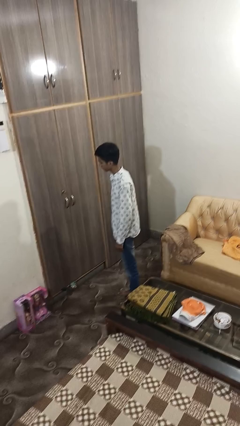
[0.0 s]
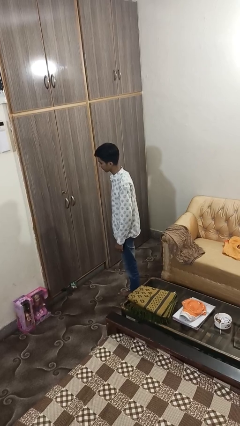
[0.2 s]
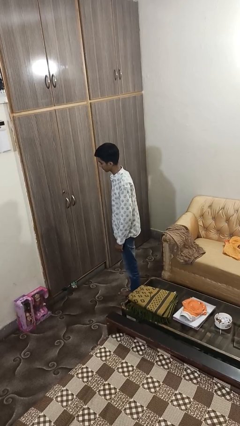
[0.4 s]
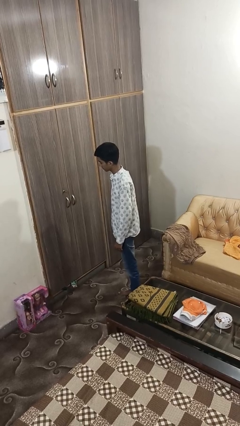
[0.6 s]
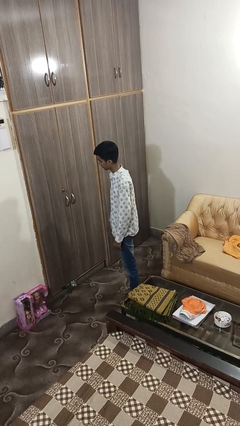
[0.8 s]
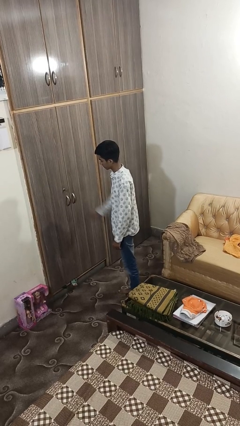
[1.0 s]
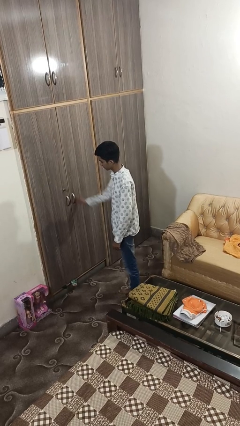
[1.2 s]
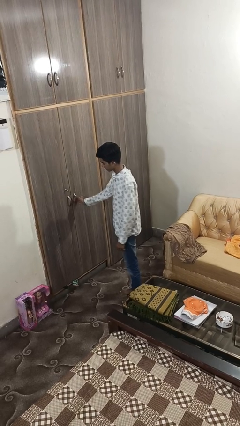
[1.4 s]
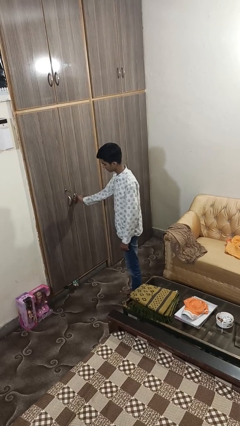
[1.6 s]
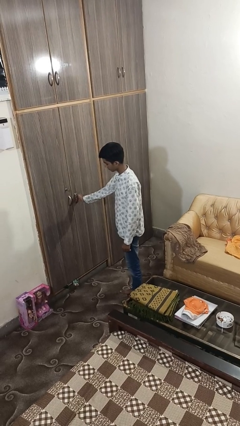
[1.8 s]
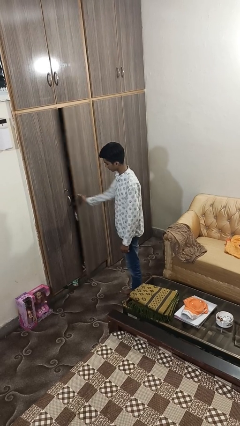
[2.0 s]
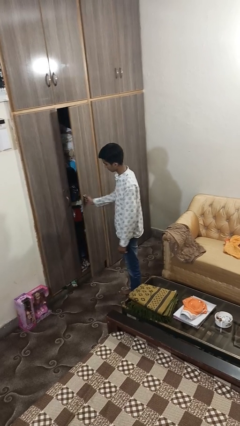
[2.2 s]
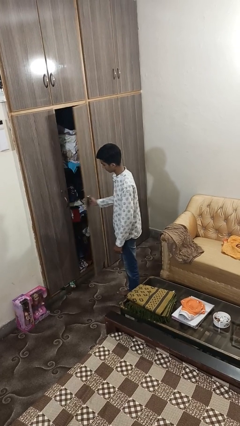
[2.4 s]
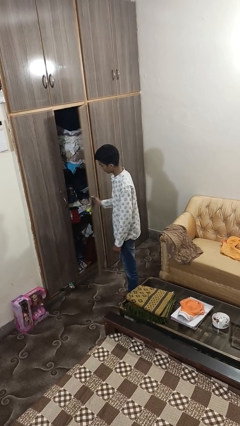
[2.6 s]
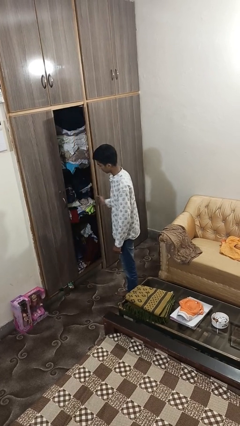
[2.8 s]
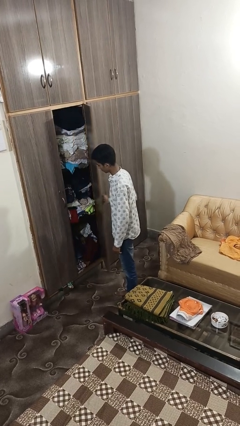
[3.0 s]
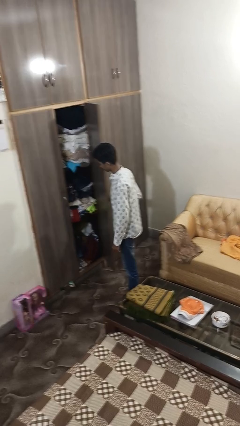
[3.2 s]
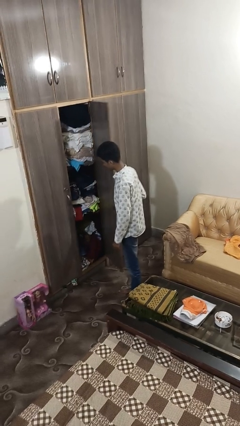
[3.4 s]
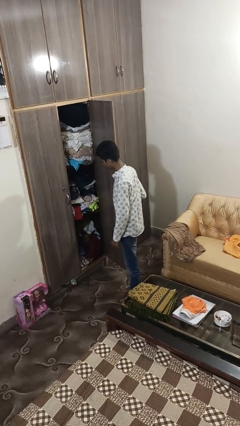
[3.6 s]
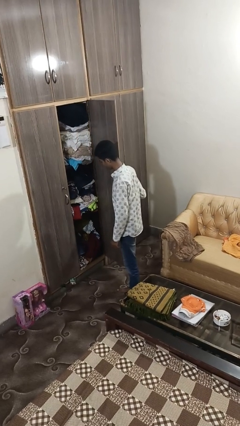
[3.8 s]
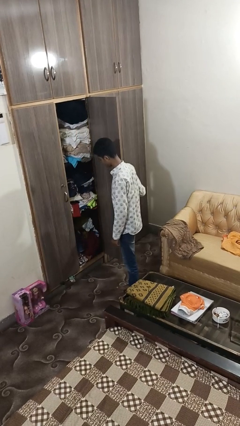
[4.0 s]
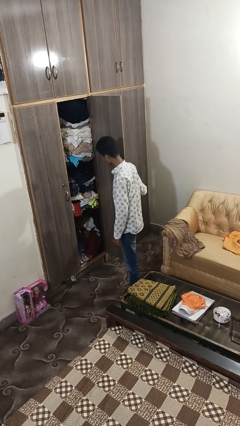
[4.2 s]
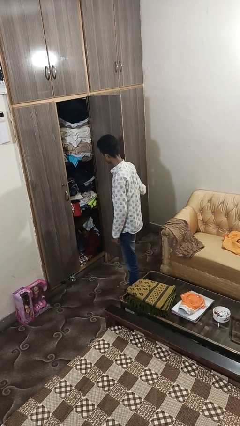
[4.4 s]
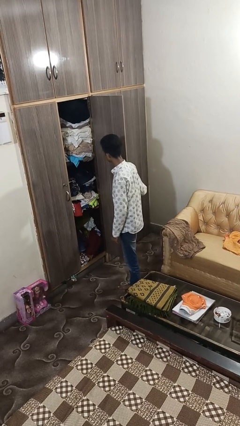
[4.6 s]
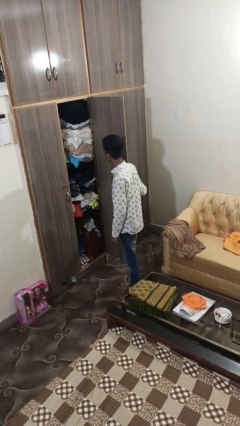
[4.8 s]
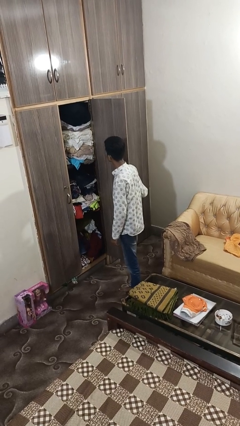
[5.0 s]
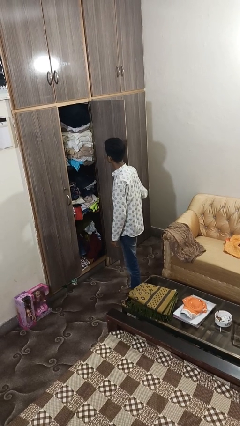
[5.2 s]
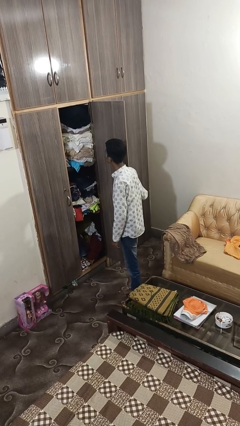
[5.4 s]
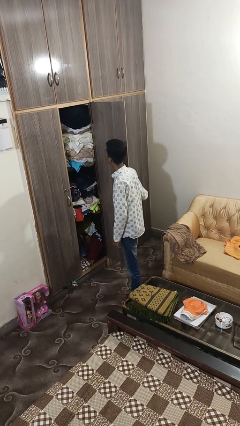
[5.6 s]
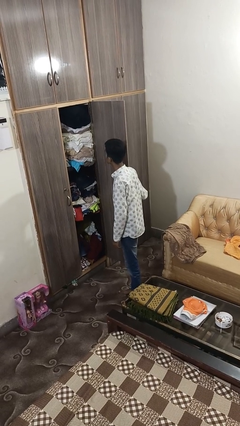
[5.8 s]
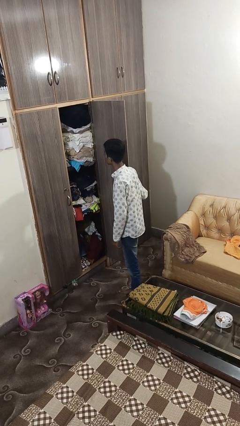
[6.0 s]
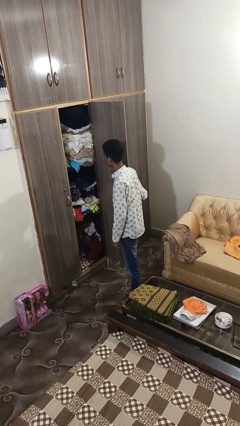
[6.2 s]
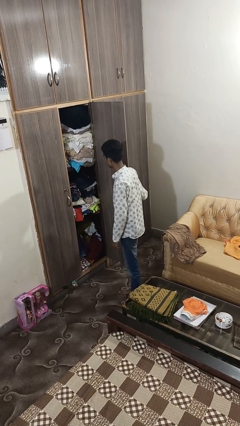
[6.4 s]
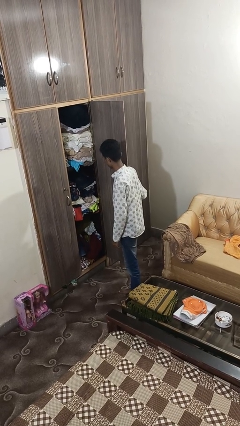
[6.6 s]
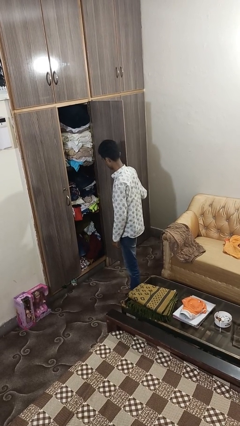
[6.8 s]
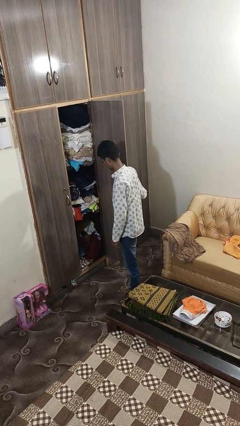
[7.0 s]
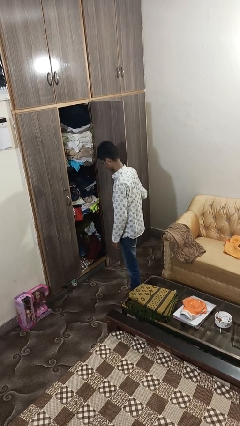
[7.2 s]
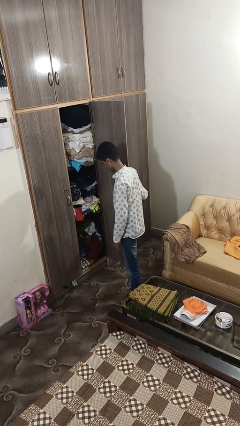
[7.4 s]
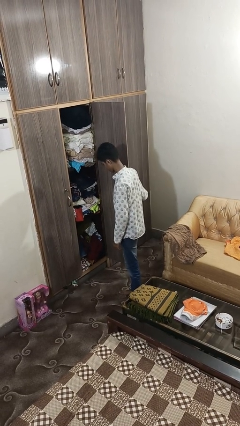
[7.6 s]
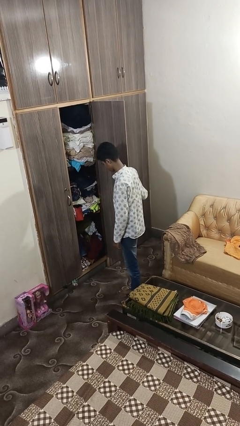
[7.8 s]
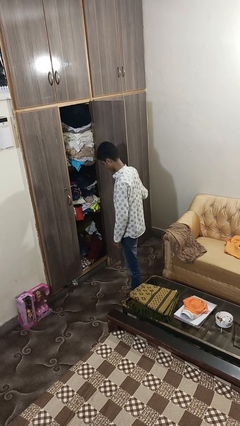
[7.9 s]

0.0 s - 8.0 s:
person opens closet door

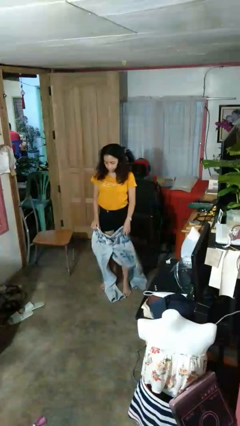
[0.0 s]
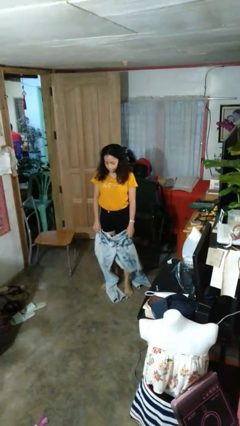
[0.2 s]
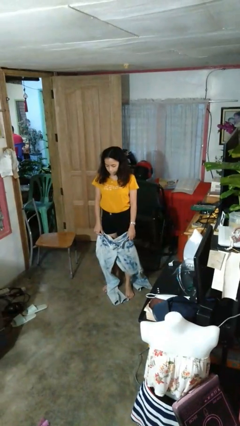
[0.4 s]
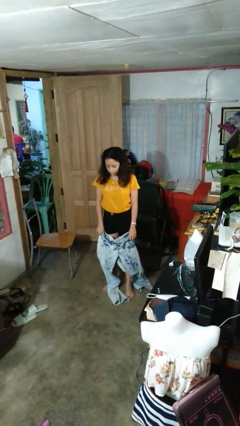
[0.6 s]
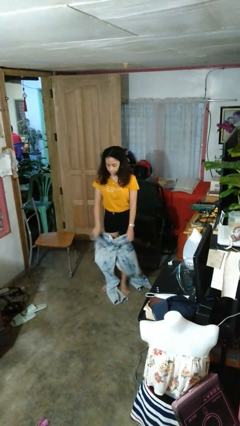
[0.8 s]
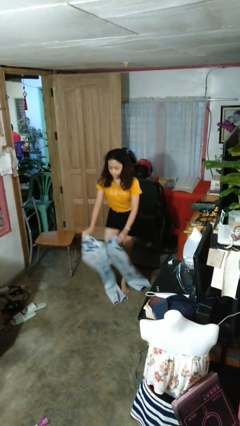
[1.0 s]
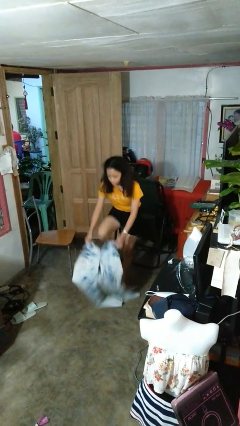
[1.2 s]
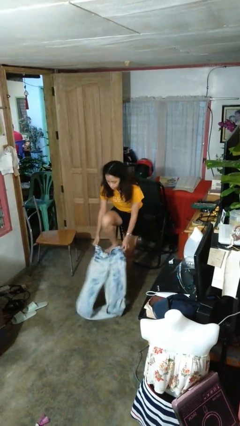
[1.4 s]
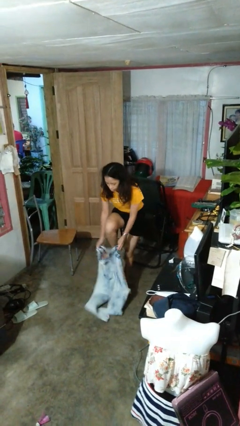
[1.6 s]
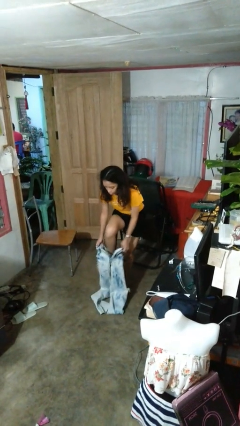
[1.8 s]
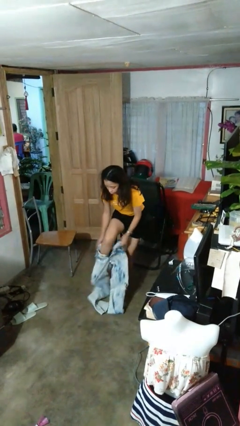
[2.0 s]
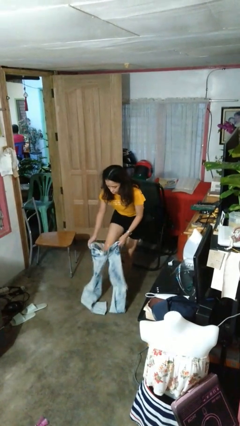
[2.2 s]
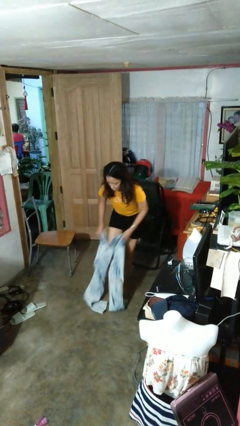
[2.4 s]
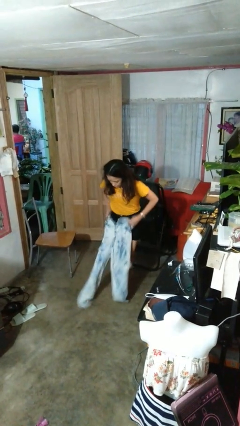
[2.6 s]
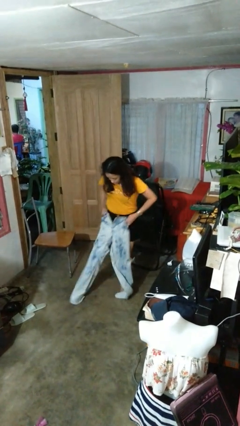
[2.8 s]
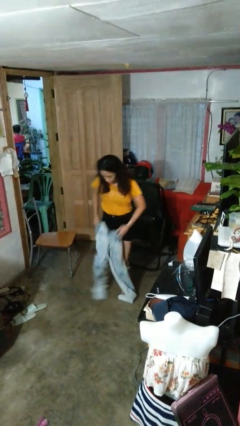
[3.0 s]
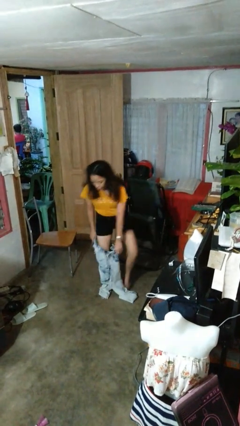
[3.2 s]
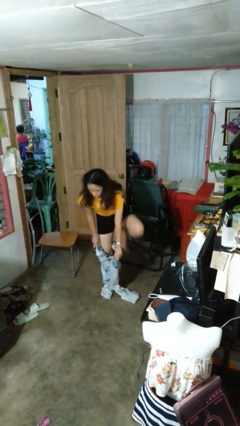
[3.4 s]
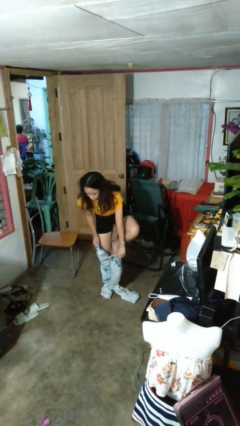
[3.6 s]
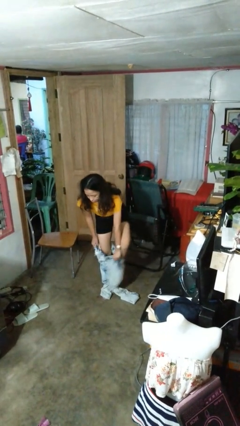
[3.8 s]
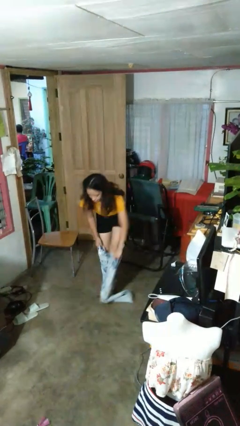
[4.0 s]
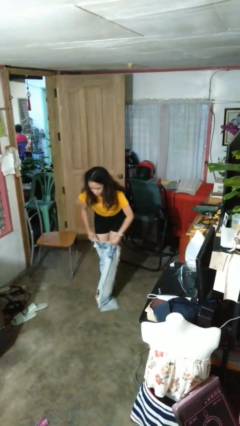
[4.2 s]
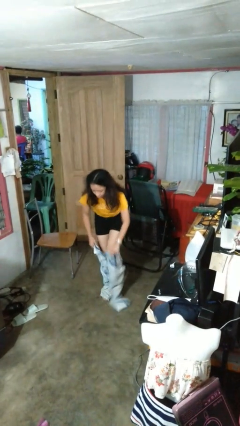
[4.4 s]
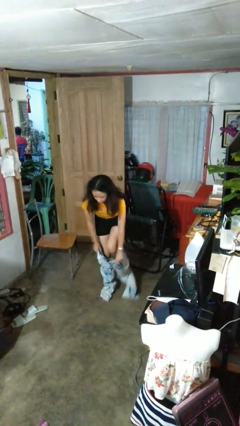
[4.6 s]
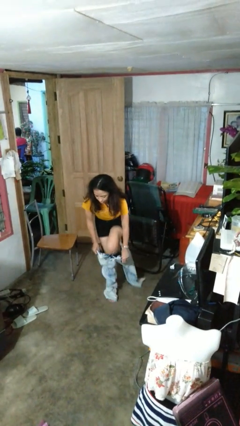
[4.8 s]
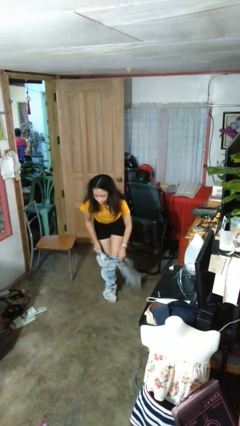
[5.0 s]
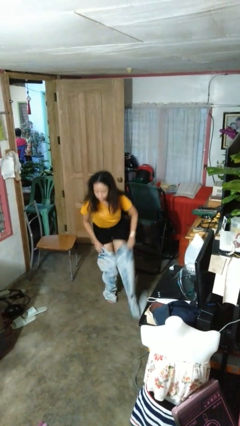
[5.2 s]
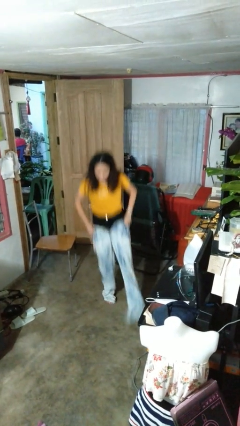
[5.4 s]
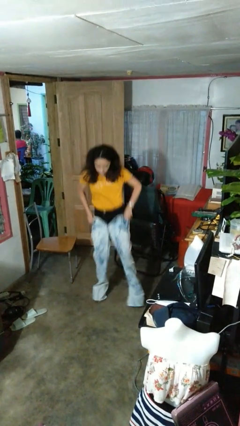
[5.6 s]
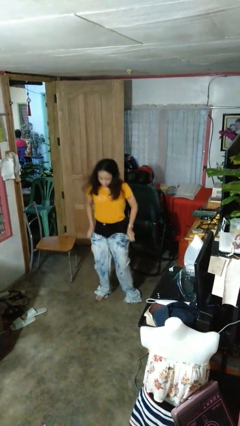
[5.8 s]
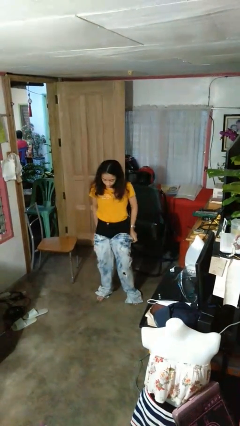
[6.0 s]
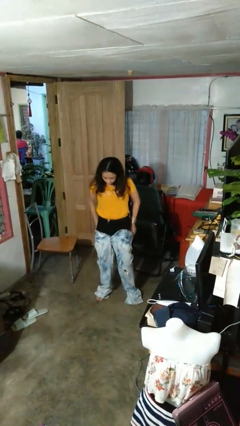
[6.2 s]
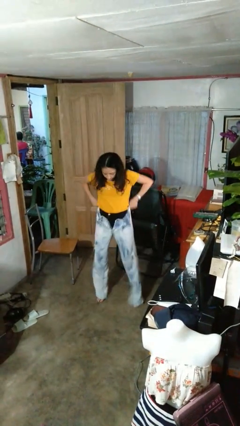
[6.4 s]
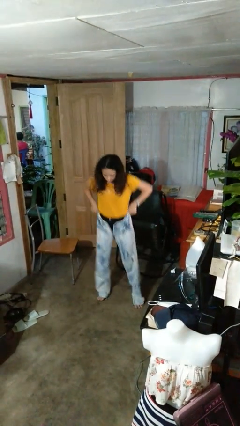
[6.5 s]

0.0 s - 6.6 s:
person puts on pants

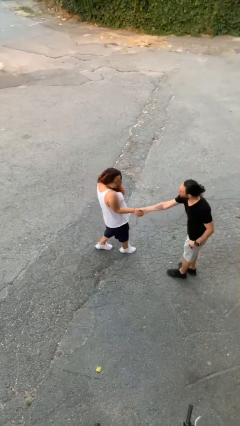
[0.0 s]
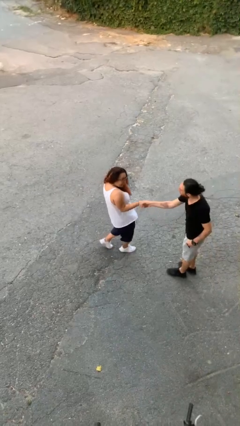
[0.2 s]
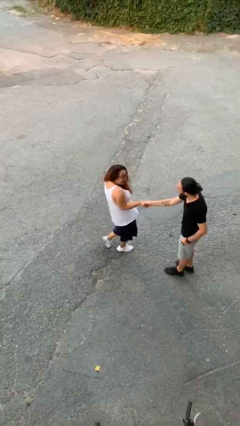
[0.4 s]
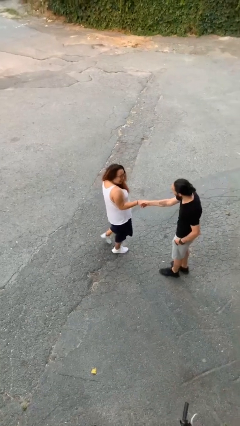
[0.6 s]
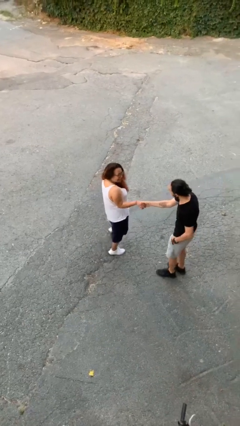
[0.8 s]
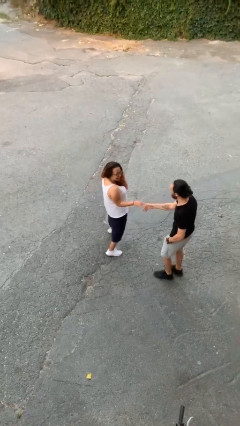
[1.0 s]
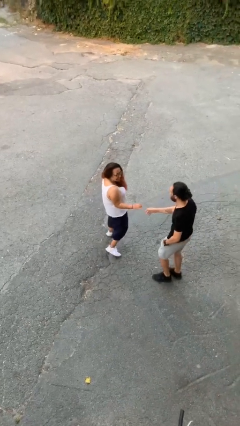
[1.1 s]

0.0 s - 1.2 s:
person shakes hand

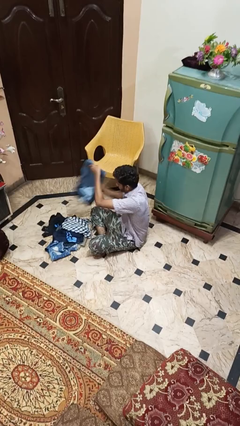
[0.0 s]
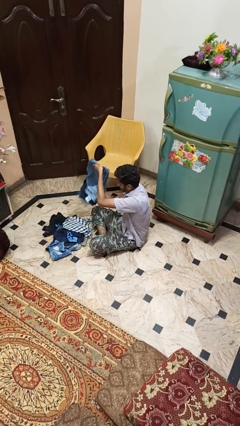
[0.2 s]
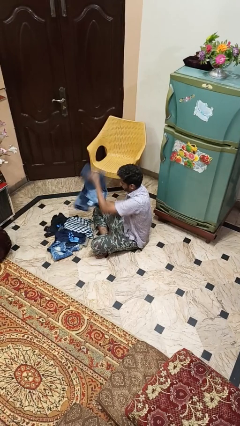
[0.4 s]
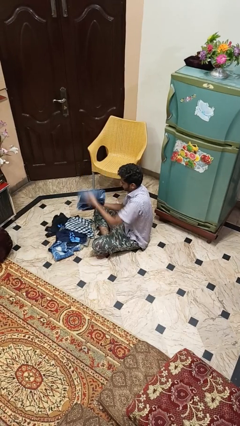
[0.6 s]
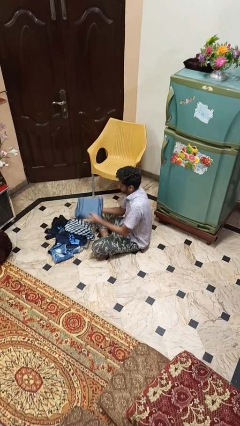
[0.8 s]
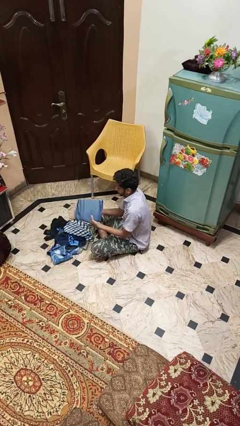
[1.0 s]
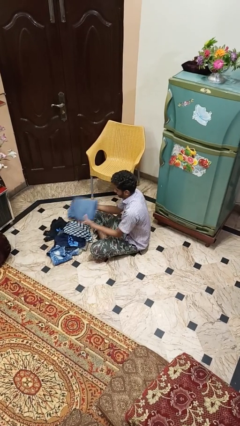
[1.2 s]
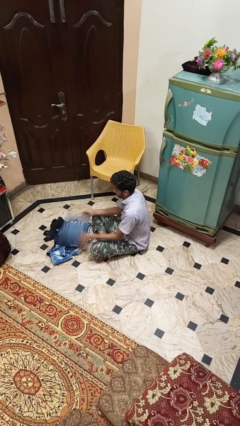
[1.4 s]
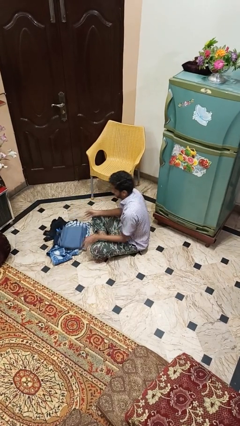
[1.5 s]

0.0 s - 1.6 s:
person folds pants

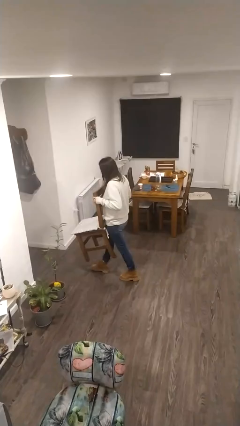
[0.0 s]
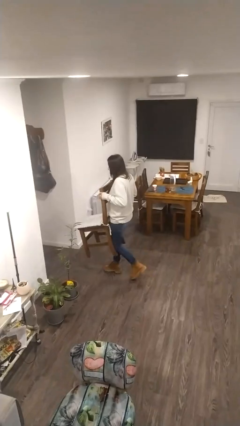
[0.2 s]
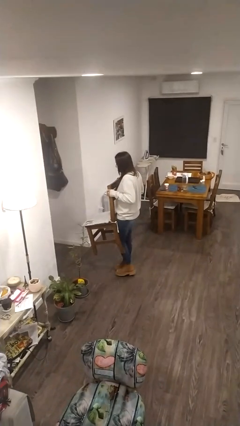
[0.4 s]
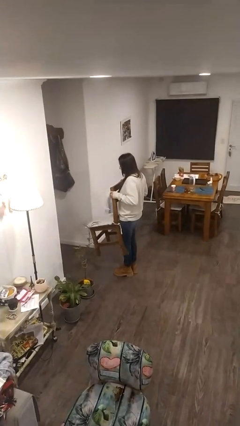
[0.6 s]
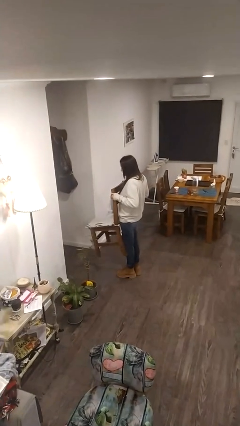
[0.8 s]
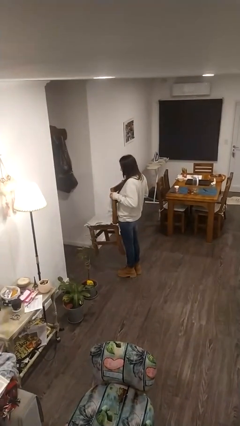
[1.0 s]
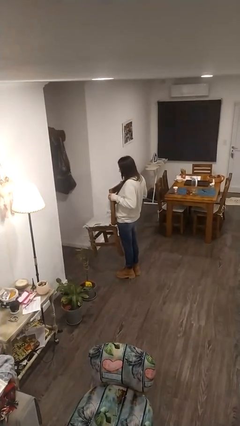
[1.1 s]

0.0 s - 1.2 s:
person carries furniture
